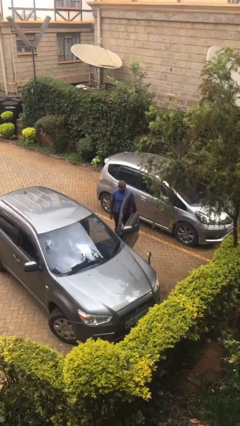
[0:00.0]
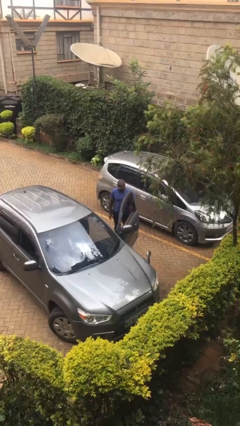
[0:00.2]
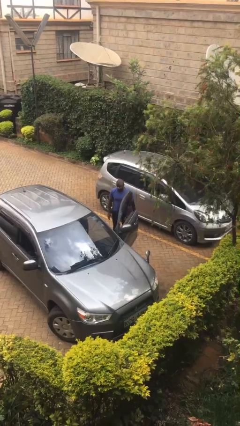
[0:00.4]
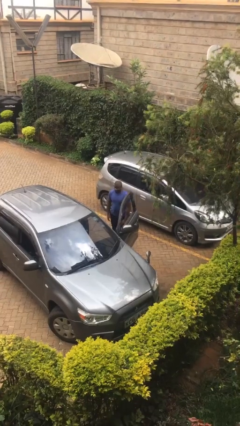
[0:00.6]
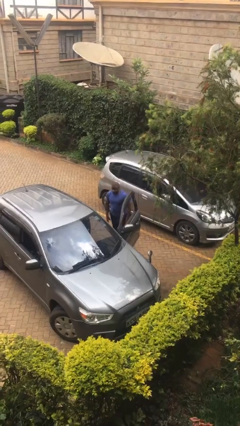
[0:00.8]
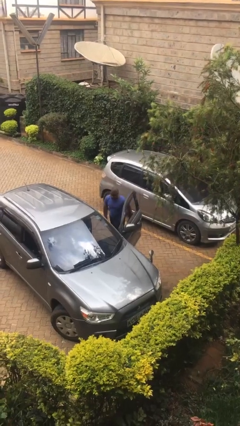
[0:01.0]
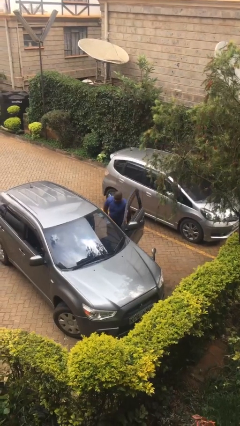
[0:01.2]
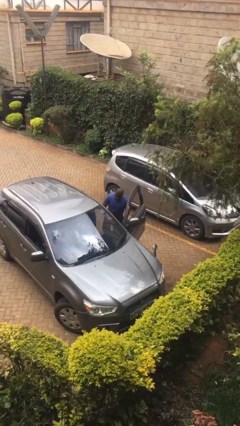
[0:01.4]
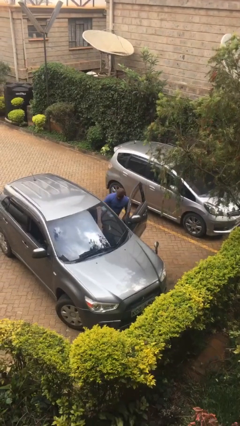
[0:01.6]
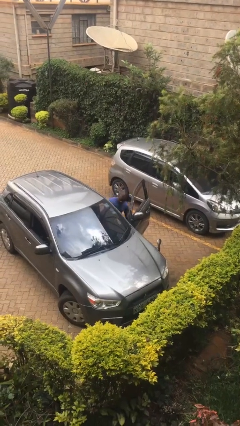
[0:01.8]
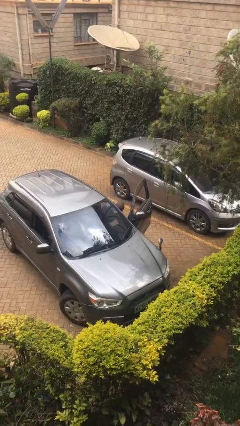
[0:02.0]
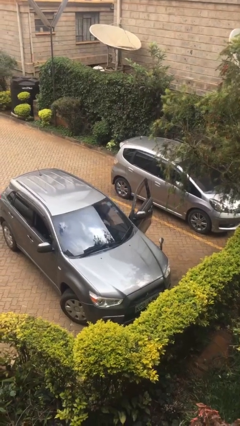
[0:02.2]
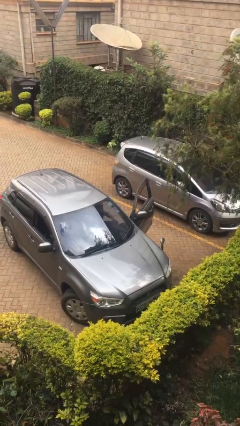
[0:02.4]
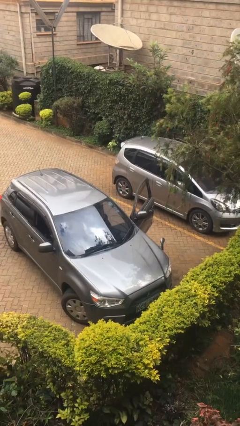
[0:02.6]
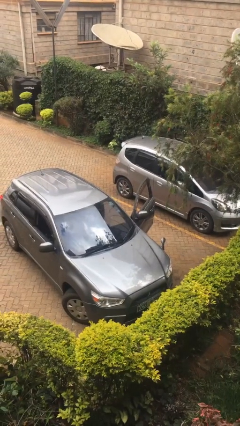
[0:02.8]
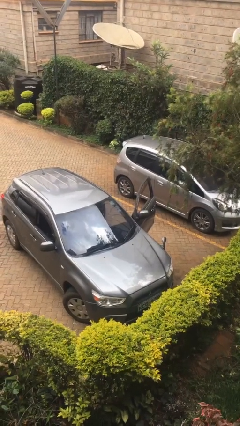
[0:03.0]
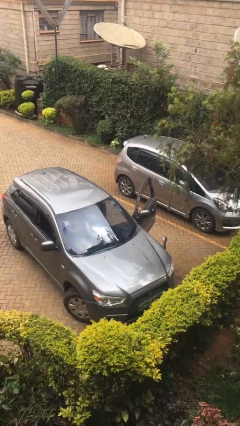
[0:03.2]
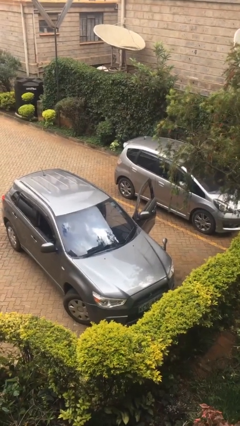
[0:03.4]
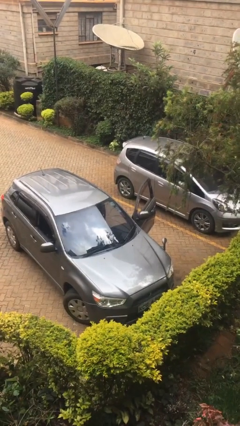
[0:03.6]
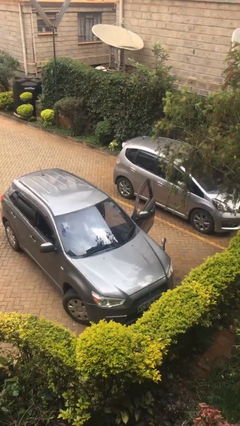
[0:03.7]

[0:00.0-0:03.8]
person enters car

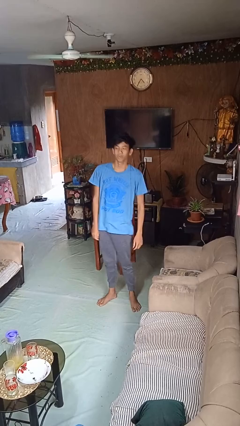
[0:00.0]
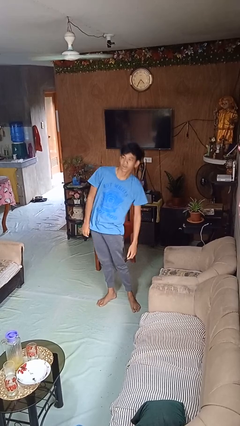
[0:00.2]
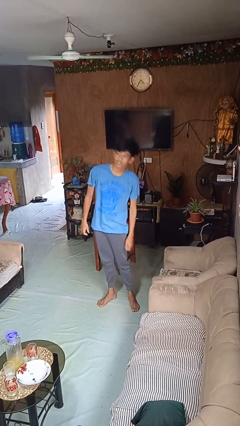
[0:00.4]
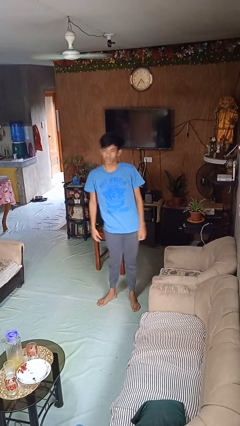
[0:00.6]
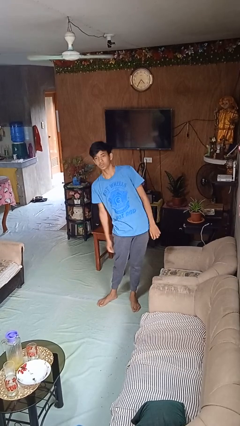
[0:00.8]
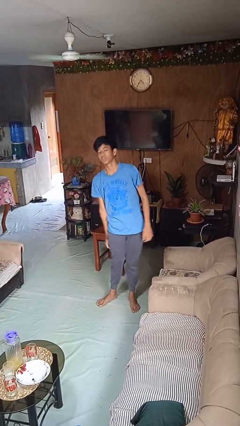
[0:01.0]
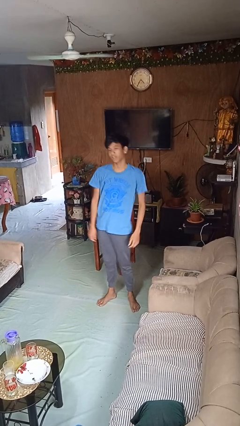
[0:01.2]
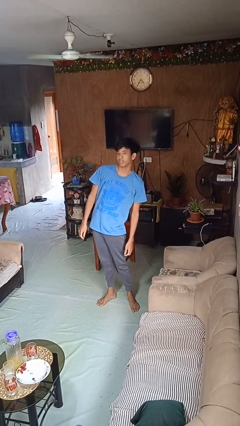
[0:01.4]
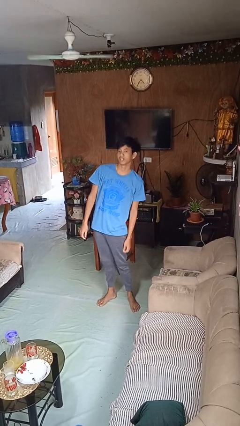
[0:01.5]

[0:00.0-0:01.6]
person dances in place

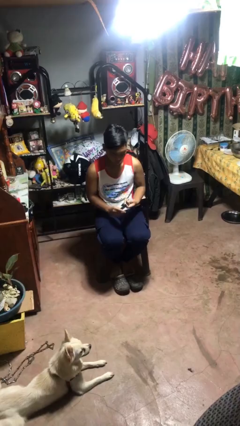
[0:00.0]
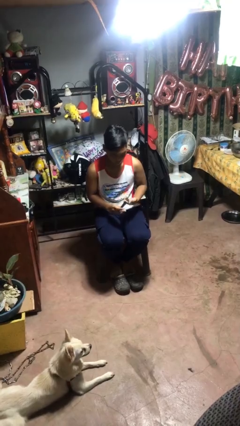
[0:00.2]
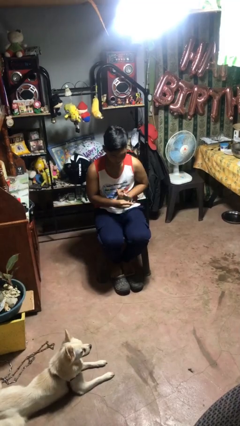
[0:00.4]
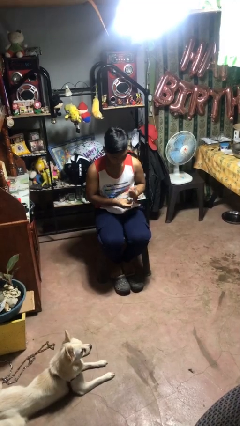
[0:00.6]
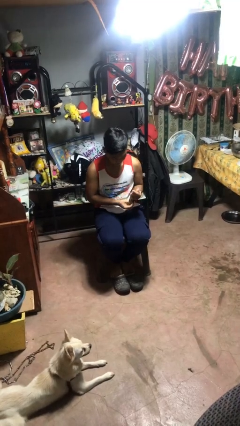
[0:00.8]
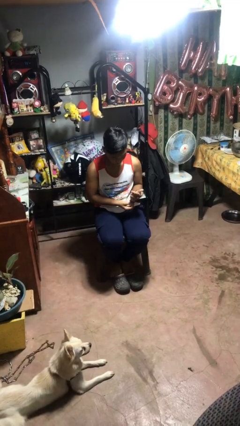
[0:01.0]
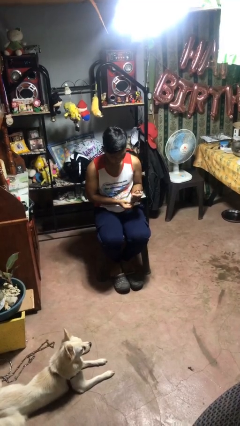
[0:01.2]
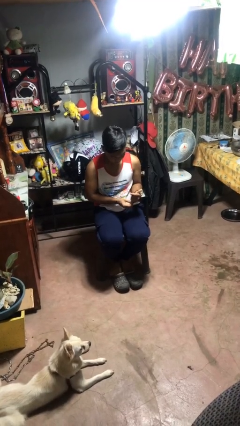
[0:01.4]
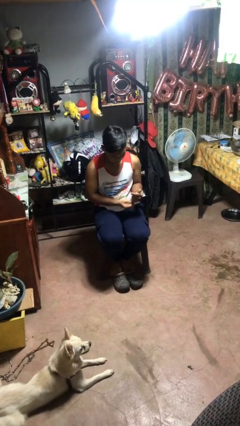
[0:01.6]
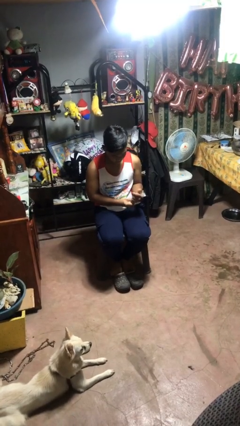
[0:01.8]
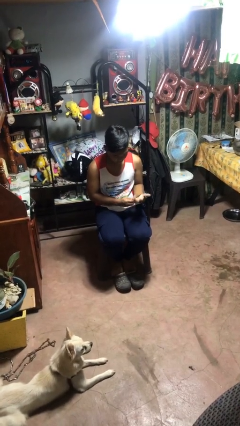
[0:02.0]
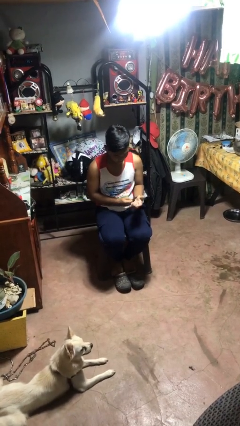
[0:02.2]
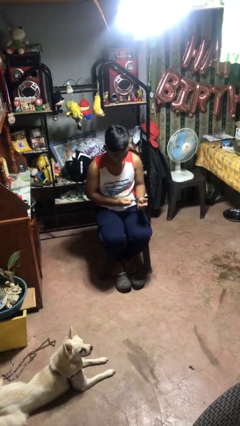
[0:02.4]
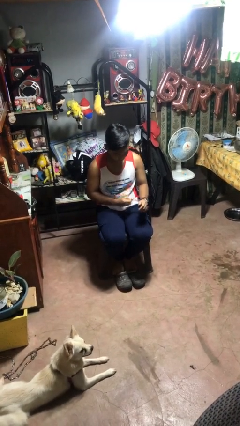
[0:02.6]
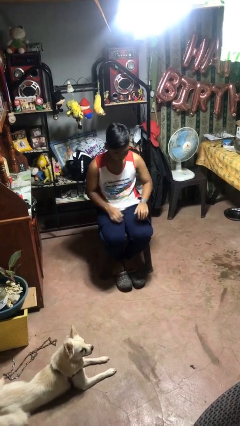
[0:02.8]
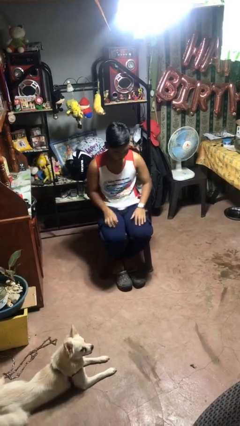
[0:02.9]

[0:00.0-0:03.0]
person puts on wristwatch

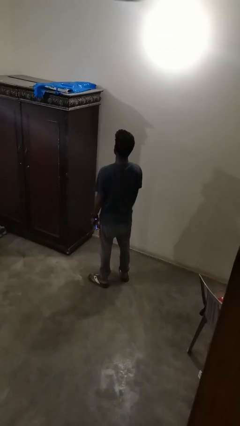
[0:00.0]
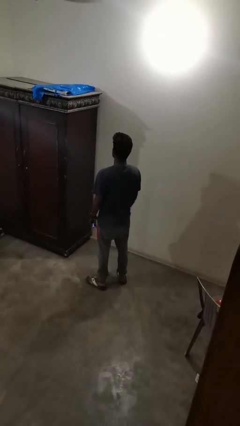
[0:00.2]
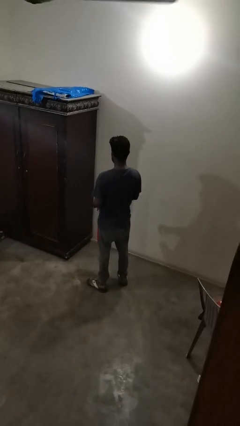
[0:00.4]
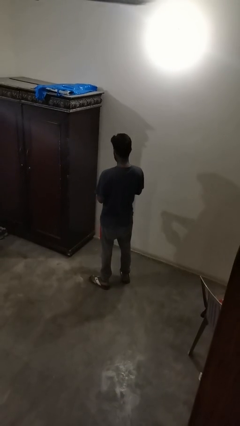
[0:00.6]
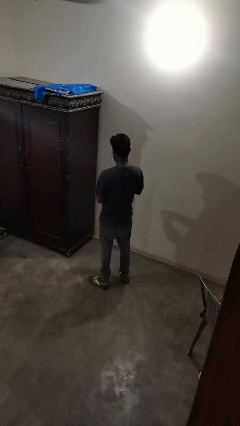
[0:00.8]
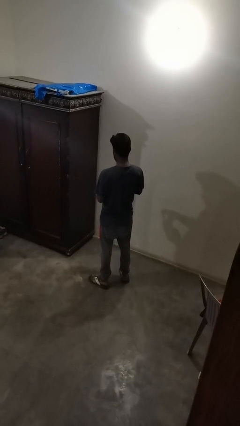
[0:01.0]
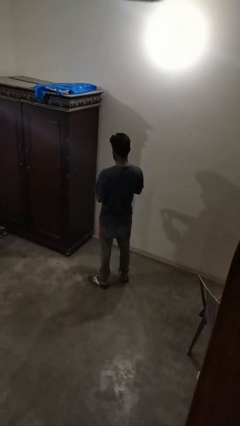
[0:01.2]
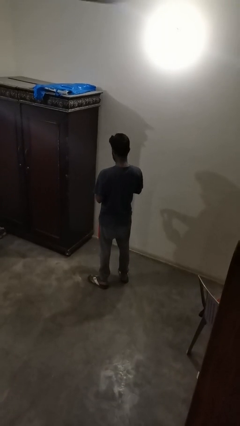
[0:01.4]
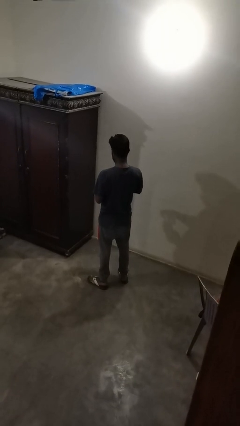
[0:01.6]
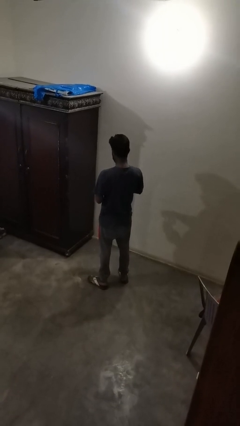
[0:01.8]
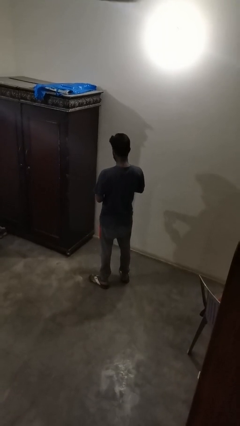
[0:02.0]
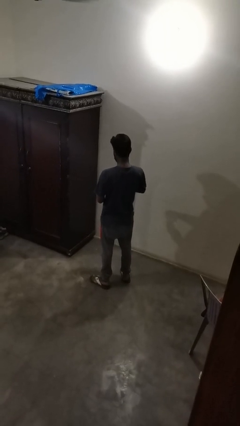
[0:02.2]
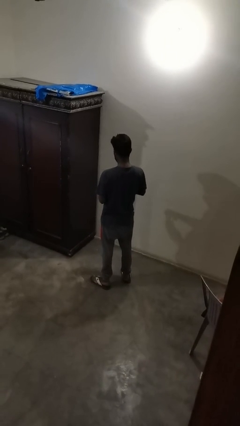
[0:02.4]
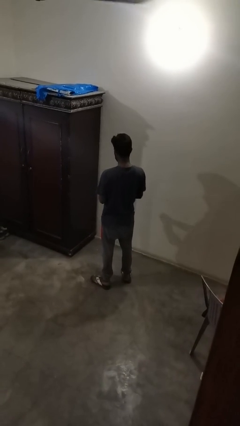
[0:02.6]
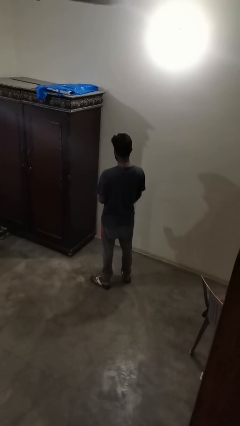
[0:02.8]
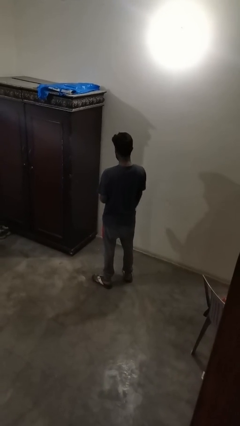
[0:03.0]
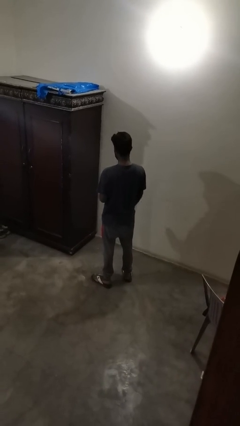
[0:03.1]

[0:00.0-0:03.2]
person opens beverage can

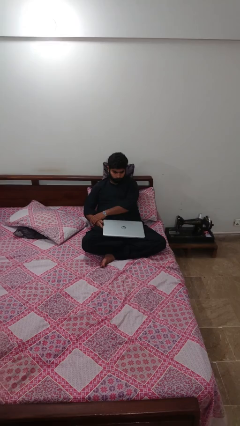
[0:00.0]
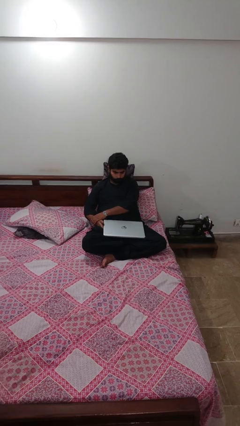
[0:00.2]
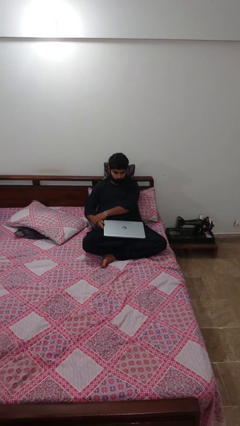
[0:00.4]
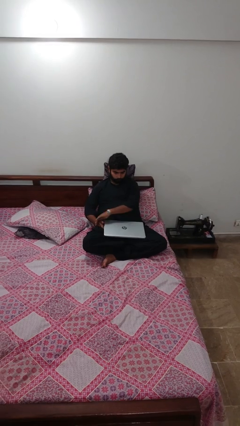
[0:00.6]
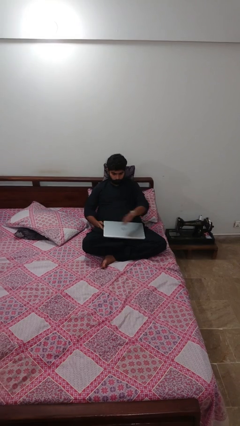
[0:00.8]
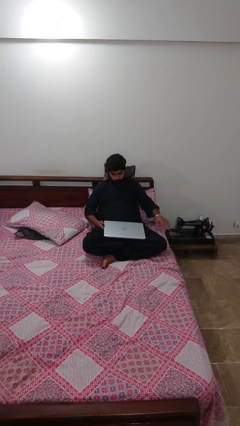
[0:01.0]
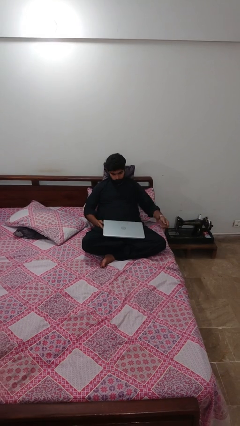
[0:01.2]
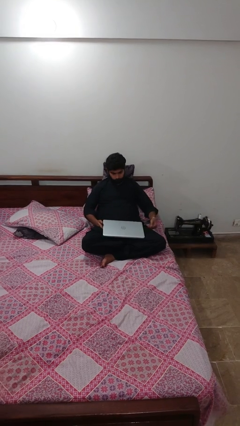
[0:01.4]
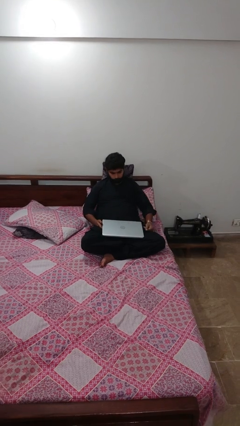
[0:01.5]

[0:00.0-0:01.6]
person waves hand over object

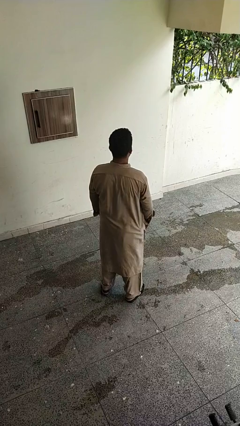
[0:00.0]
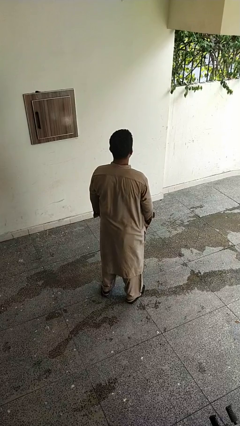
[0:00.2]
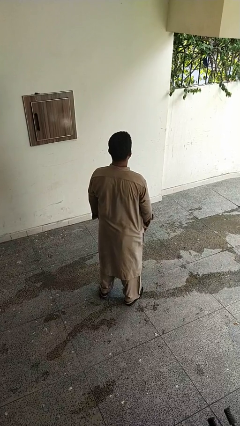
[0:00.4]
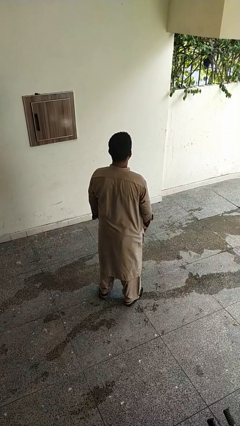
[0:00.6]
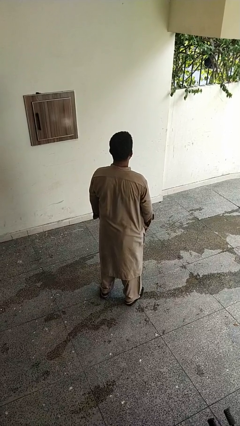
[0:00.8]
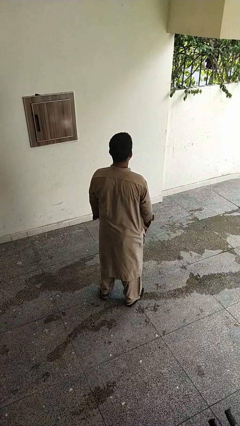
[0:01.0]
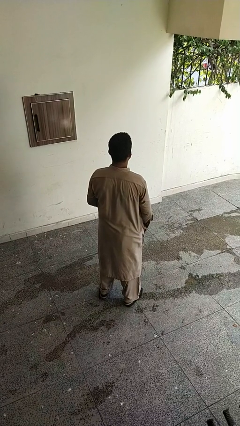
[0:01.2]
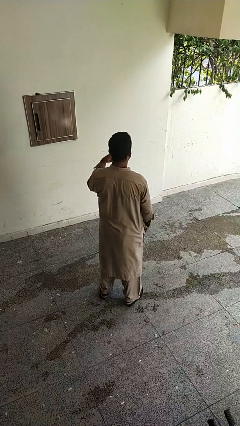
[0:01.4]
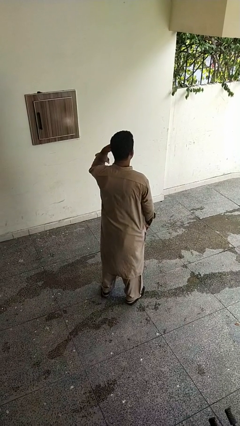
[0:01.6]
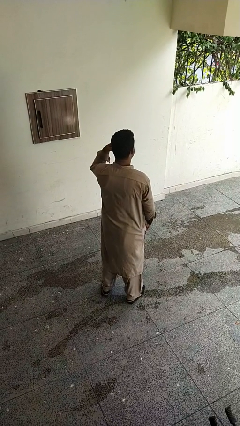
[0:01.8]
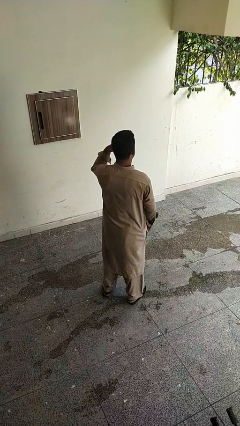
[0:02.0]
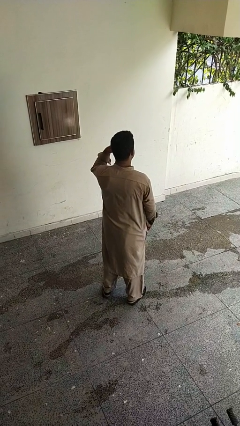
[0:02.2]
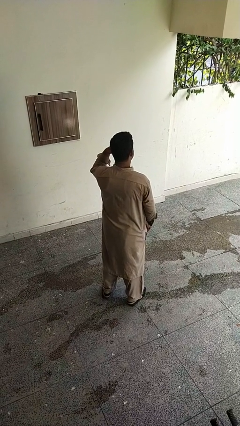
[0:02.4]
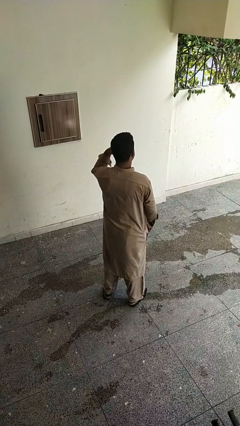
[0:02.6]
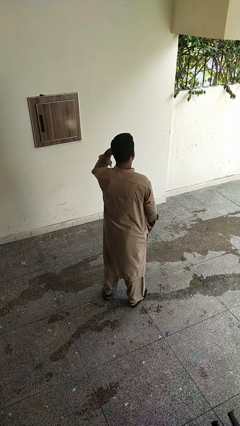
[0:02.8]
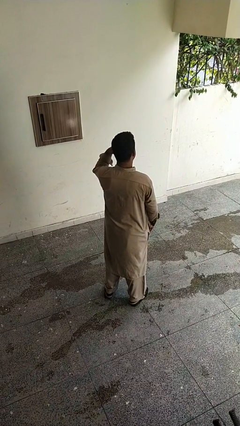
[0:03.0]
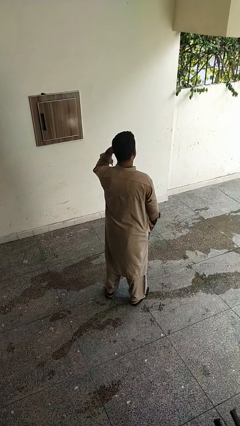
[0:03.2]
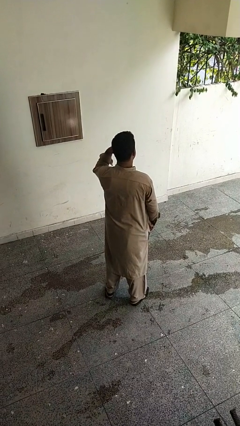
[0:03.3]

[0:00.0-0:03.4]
person gestures call me

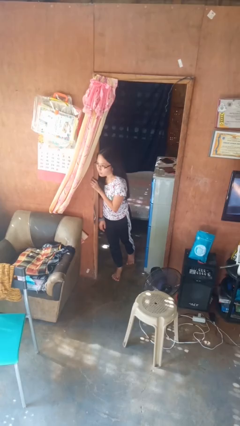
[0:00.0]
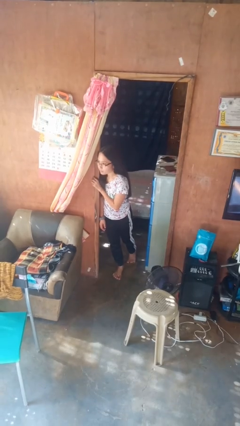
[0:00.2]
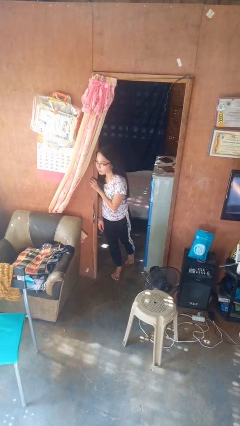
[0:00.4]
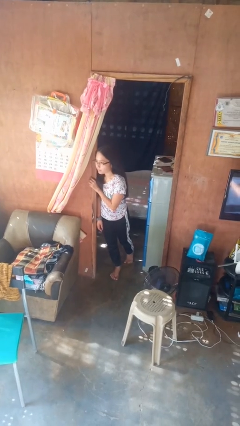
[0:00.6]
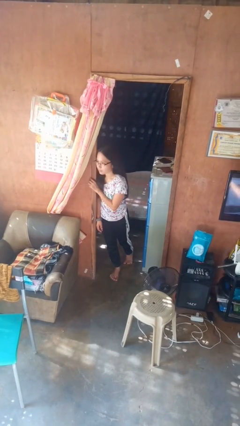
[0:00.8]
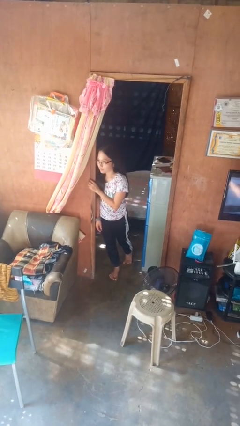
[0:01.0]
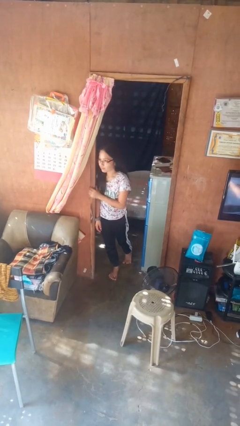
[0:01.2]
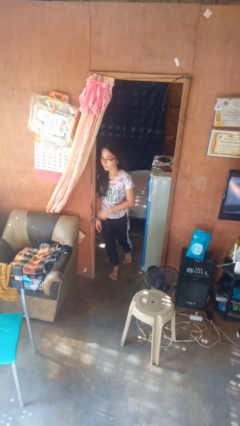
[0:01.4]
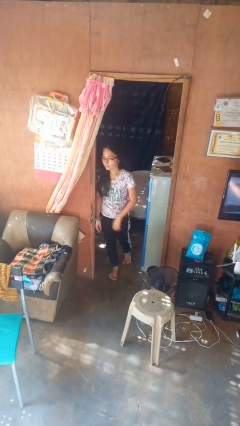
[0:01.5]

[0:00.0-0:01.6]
person bumps into wall
